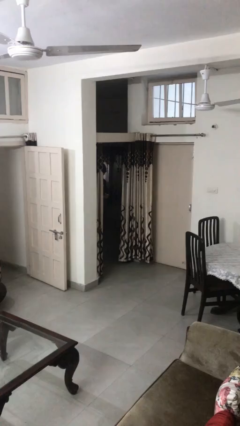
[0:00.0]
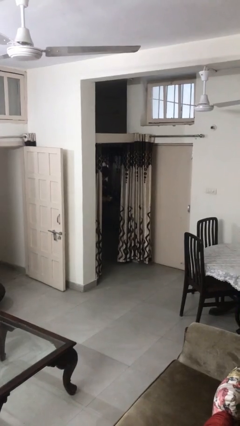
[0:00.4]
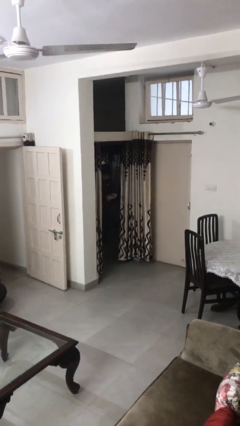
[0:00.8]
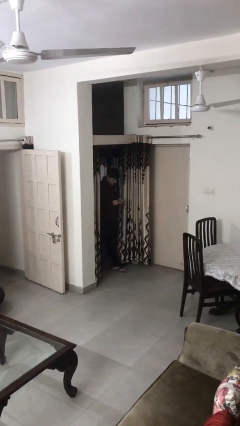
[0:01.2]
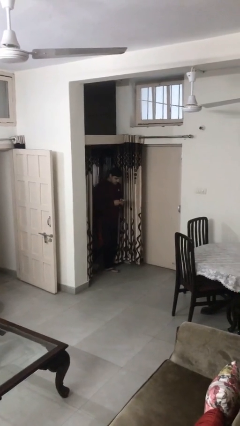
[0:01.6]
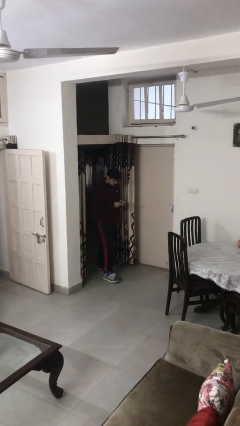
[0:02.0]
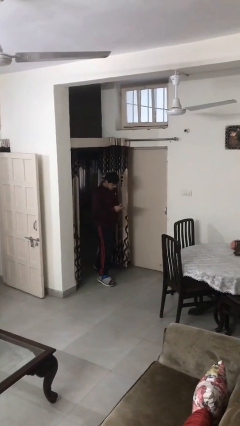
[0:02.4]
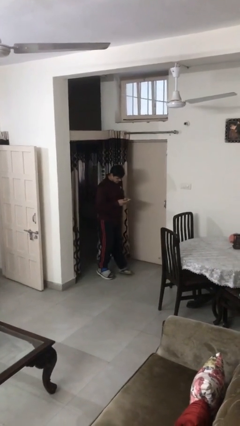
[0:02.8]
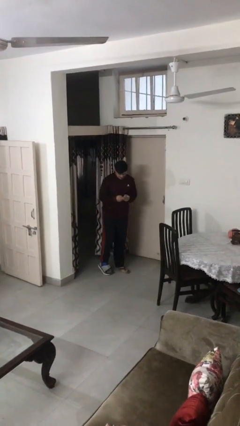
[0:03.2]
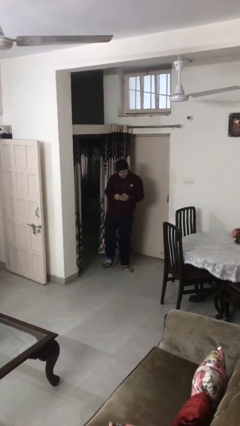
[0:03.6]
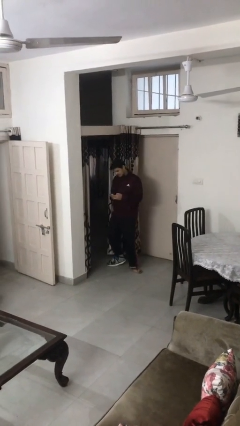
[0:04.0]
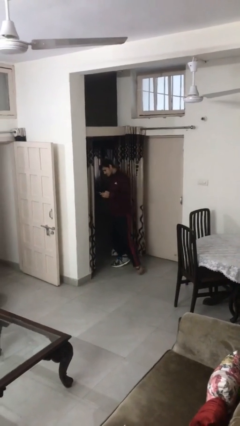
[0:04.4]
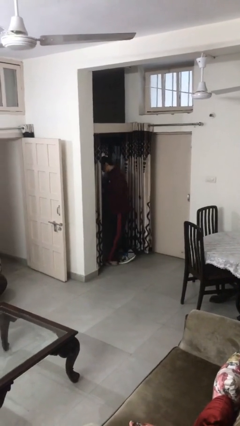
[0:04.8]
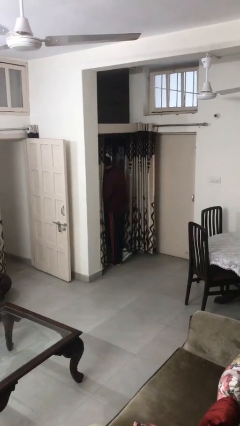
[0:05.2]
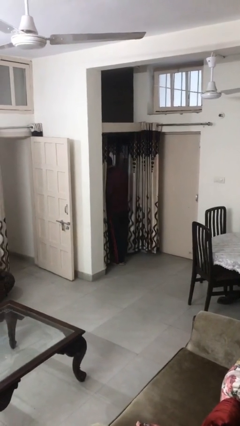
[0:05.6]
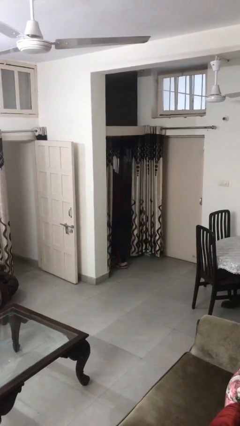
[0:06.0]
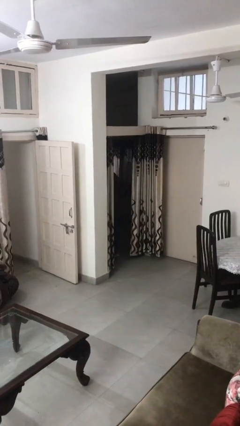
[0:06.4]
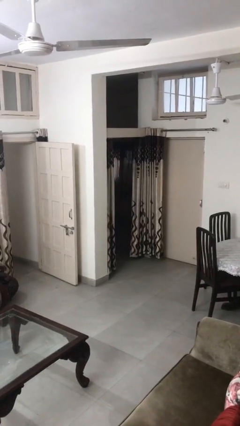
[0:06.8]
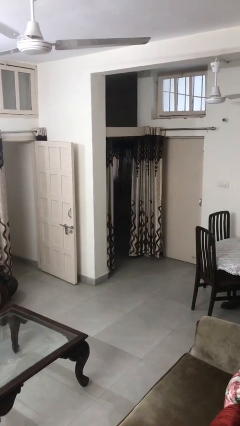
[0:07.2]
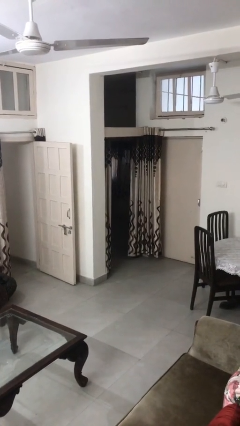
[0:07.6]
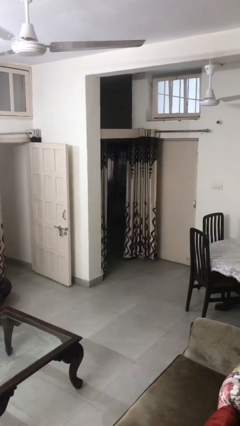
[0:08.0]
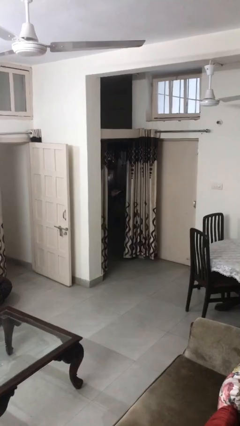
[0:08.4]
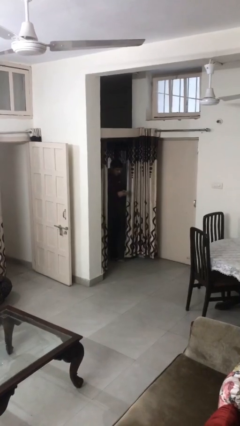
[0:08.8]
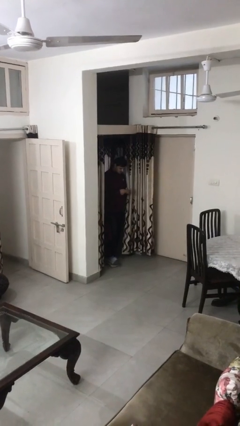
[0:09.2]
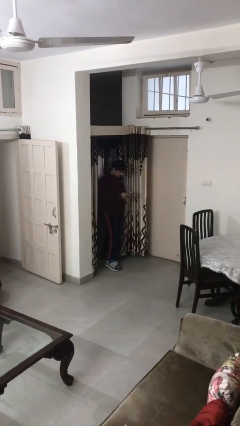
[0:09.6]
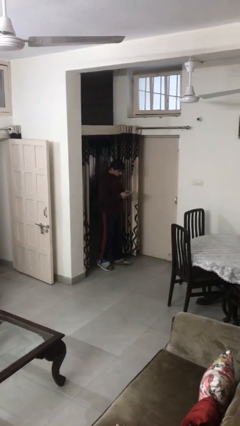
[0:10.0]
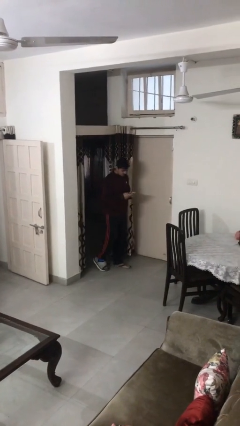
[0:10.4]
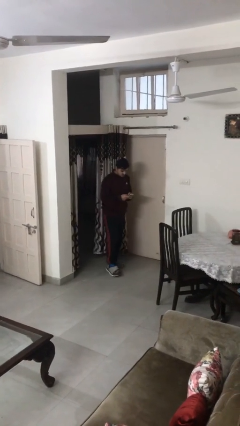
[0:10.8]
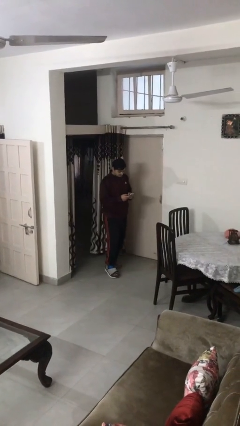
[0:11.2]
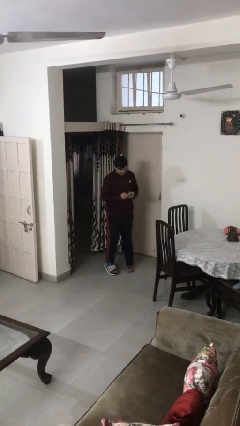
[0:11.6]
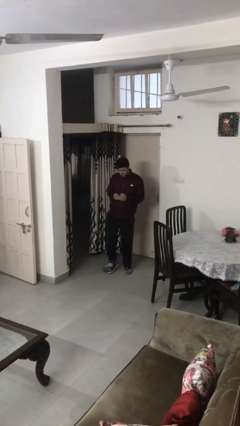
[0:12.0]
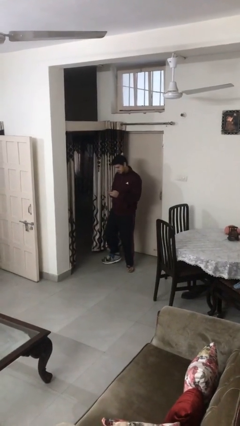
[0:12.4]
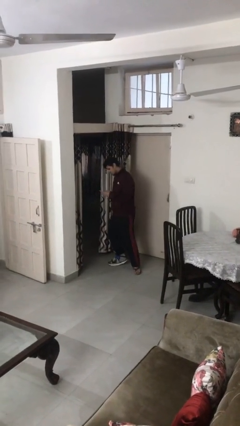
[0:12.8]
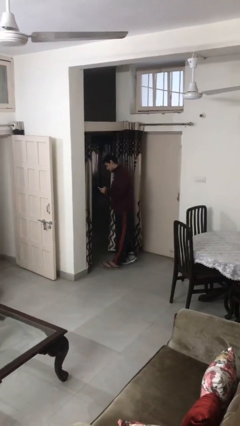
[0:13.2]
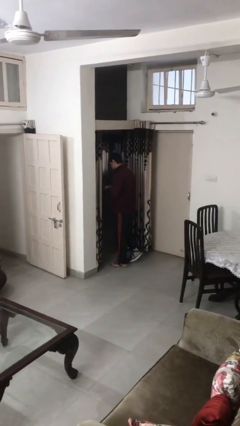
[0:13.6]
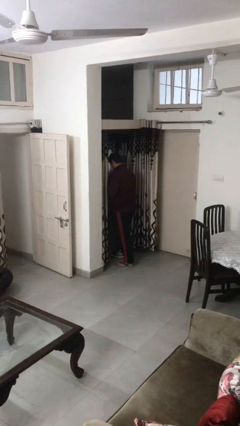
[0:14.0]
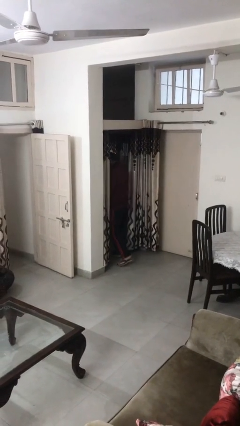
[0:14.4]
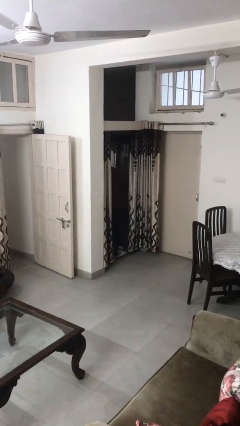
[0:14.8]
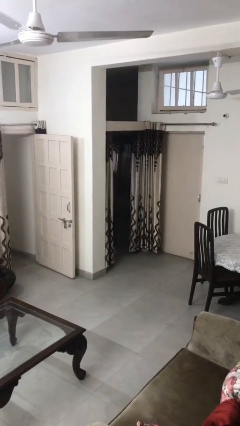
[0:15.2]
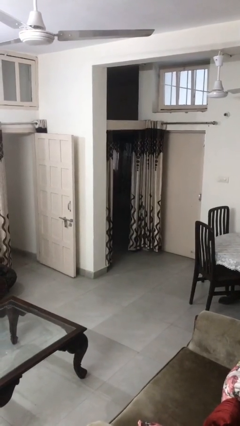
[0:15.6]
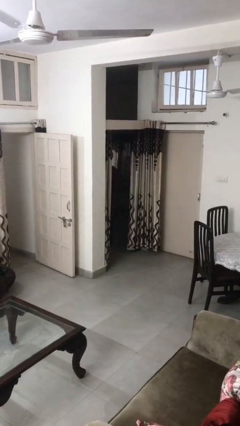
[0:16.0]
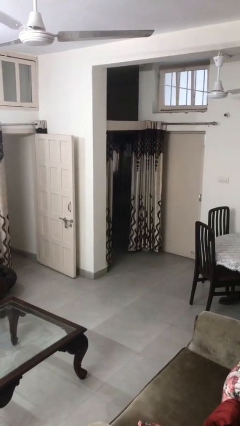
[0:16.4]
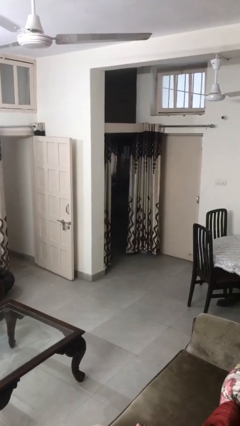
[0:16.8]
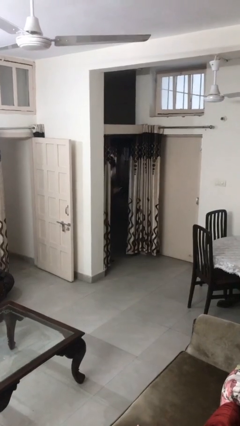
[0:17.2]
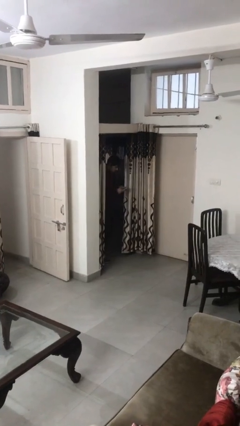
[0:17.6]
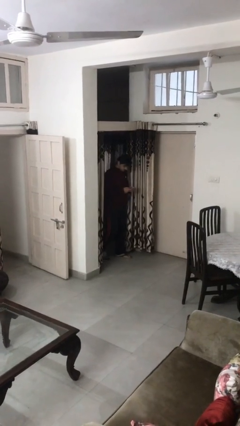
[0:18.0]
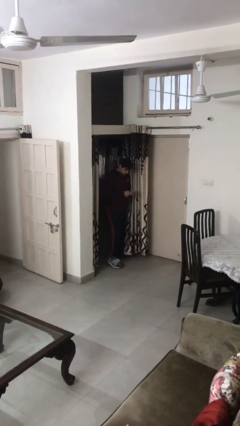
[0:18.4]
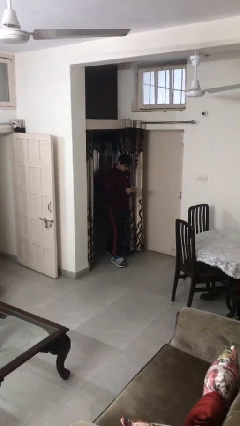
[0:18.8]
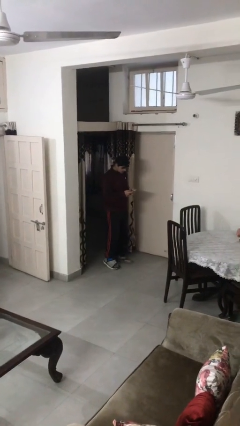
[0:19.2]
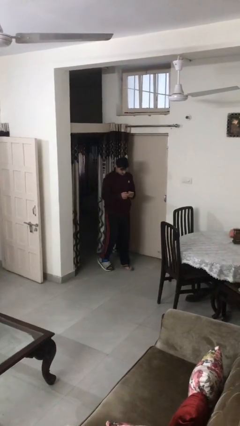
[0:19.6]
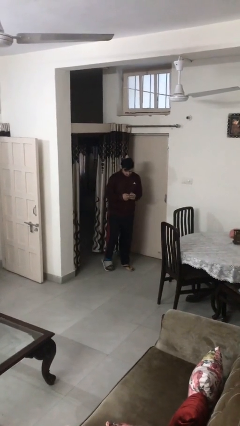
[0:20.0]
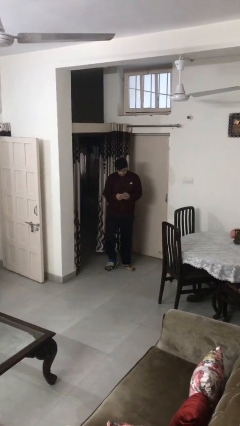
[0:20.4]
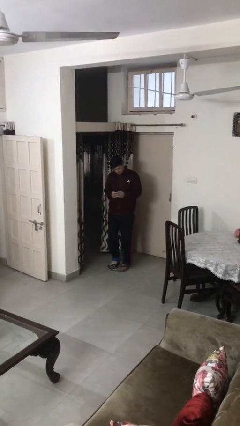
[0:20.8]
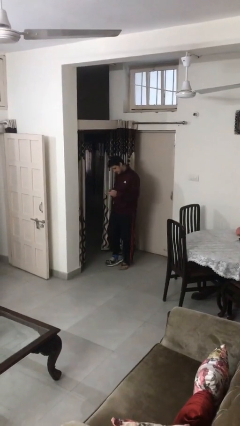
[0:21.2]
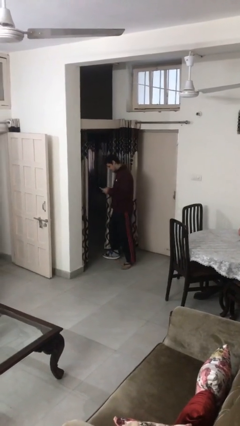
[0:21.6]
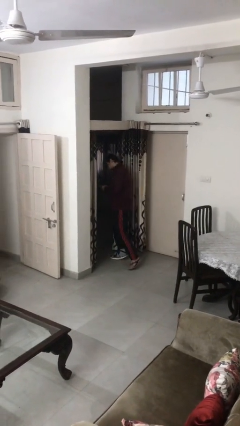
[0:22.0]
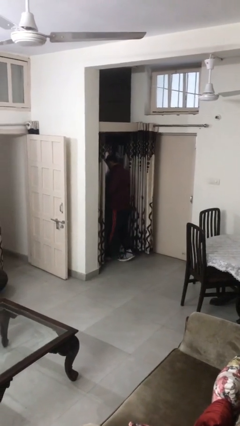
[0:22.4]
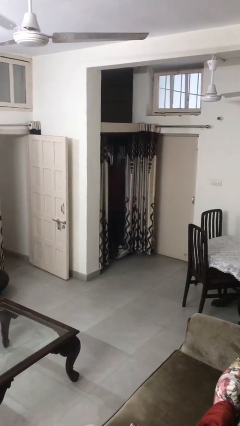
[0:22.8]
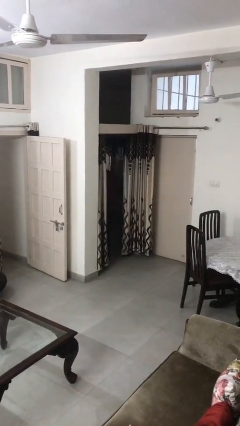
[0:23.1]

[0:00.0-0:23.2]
person texts on phone

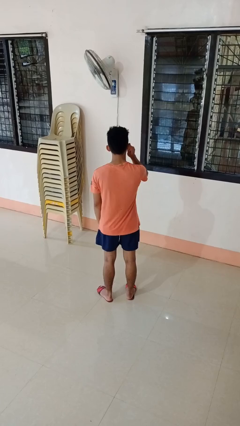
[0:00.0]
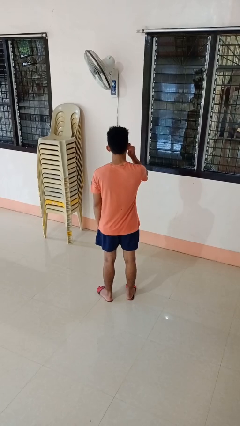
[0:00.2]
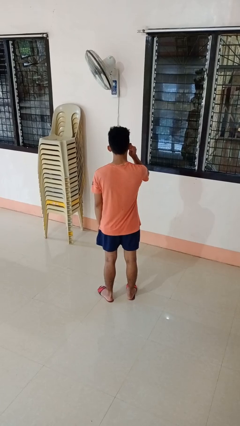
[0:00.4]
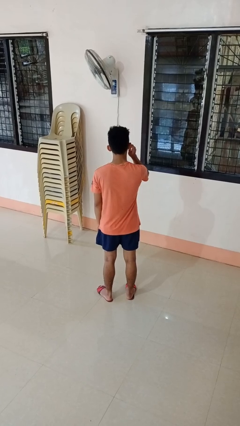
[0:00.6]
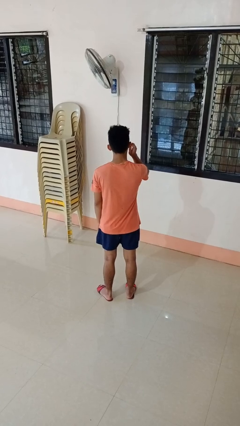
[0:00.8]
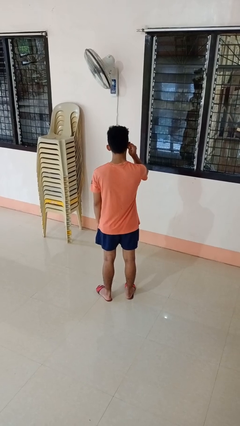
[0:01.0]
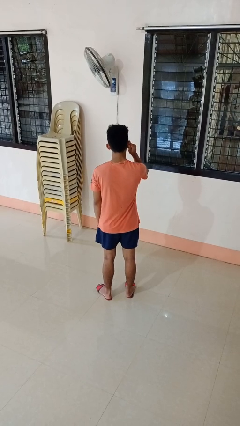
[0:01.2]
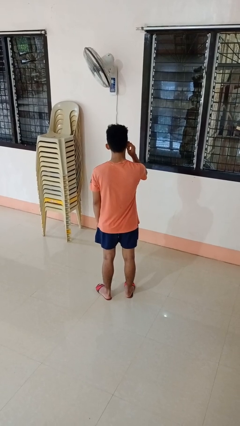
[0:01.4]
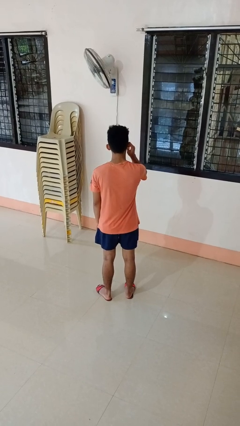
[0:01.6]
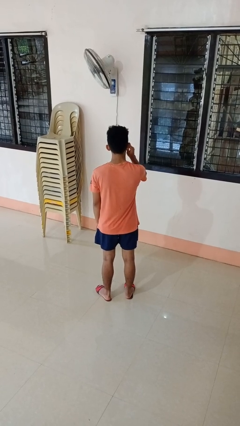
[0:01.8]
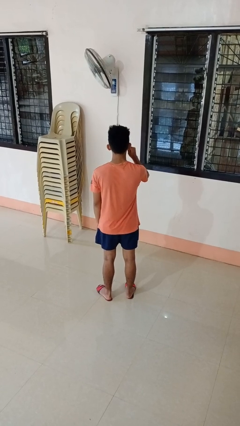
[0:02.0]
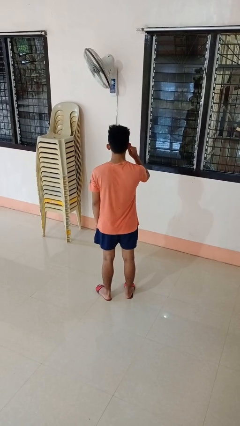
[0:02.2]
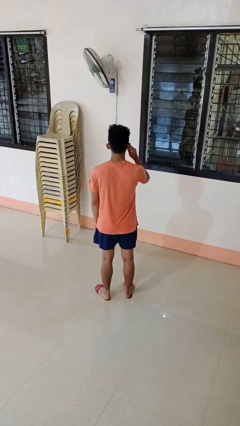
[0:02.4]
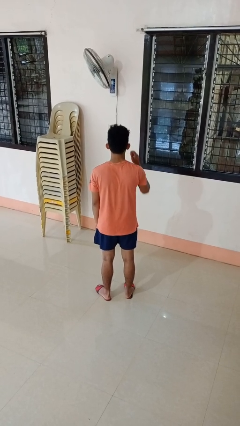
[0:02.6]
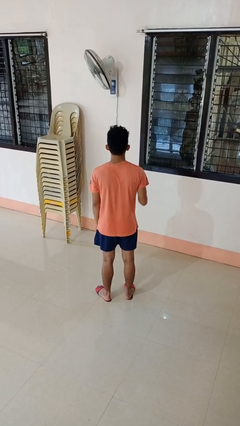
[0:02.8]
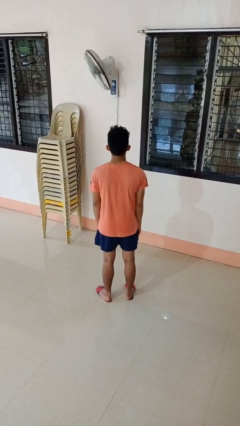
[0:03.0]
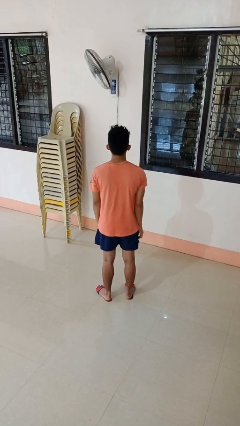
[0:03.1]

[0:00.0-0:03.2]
person touches earlobe

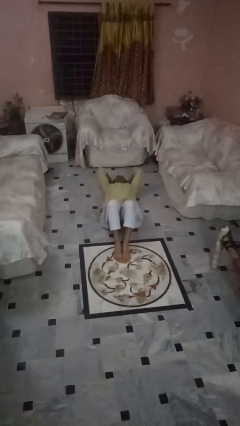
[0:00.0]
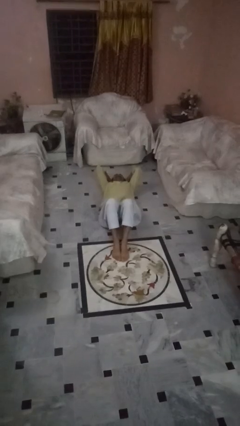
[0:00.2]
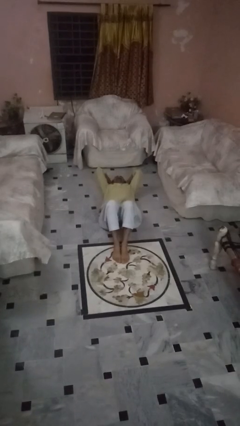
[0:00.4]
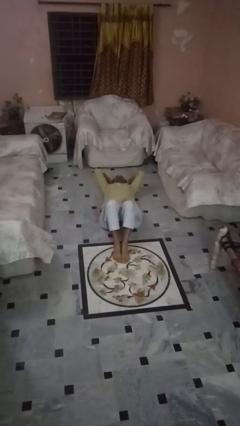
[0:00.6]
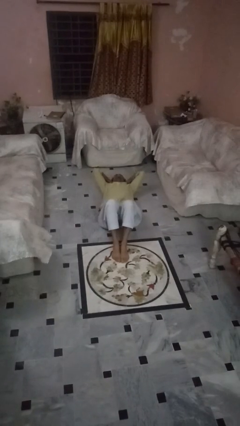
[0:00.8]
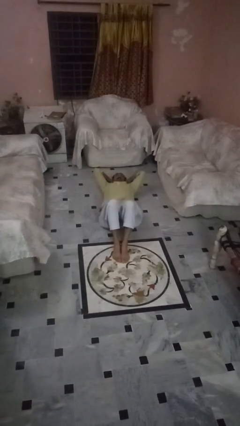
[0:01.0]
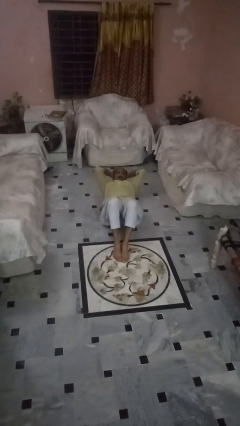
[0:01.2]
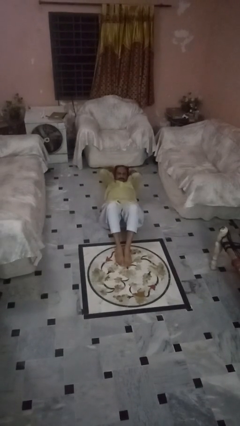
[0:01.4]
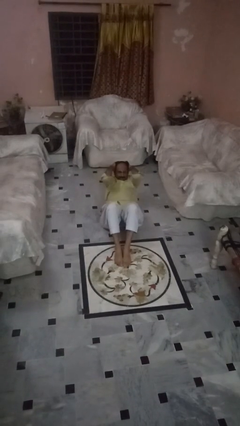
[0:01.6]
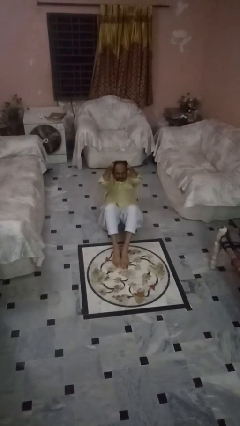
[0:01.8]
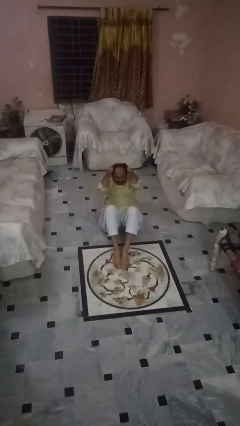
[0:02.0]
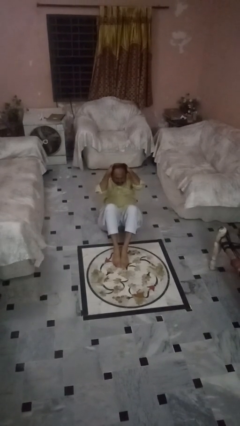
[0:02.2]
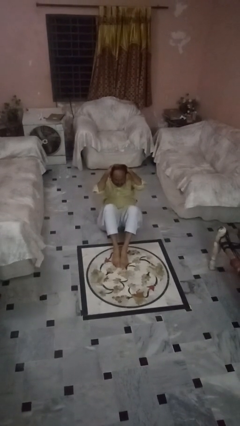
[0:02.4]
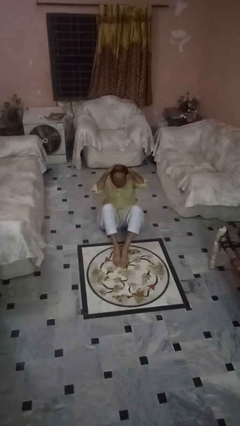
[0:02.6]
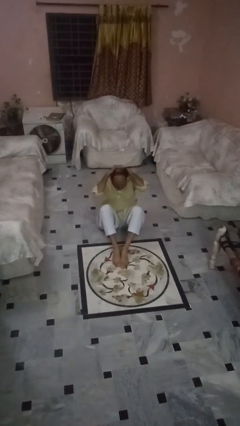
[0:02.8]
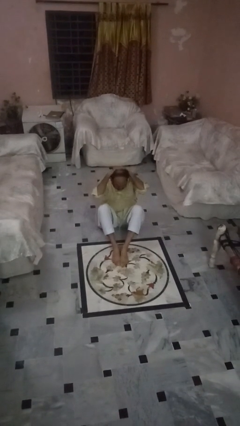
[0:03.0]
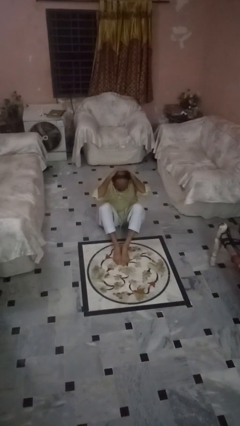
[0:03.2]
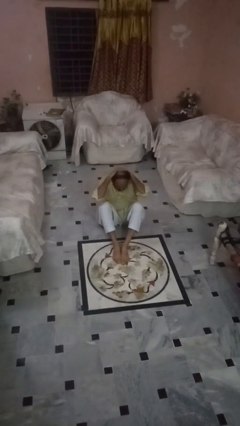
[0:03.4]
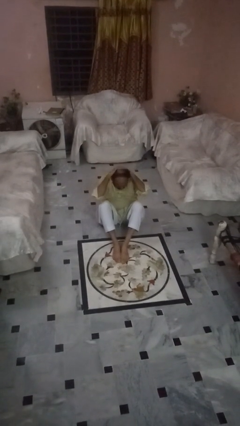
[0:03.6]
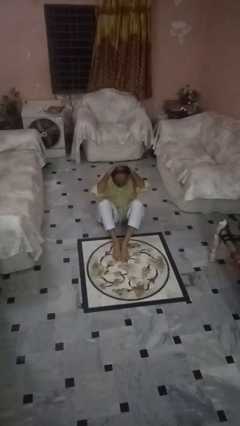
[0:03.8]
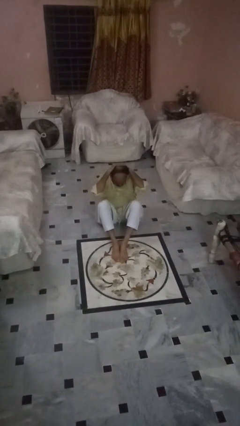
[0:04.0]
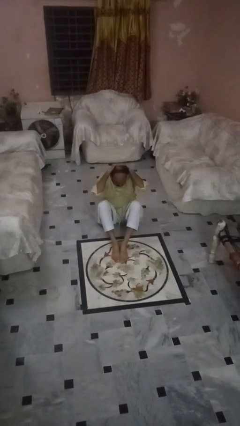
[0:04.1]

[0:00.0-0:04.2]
person exercises with situp
